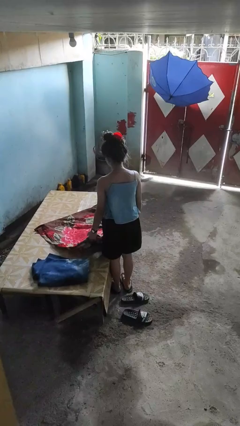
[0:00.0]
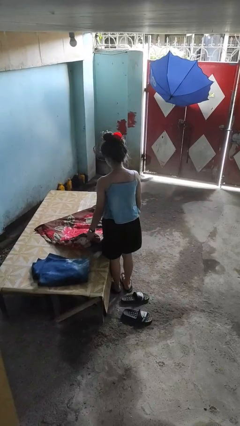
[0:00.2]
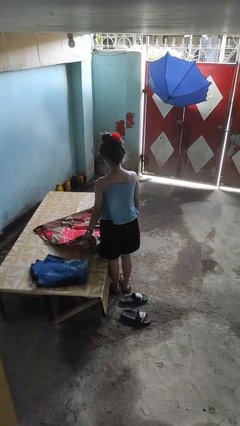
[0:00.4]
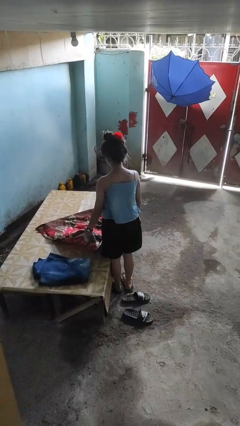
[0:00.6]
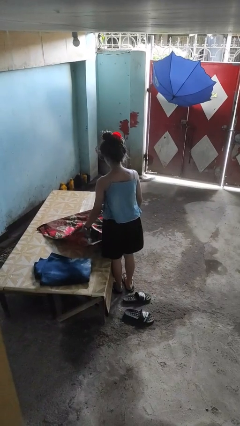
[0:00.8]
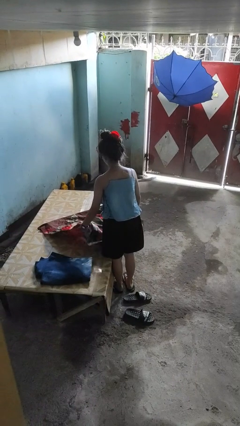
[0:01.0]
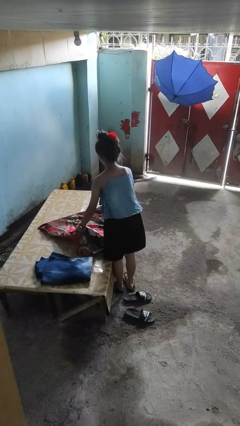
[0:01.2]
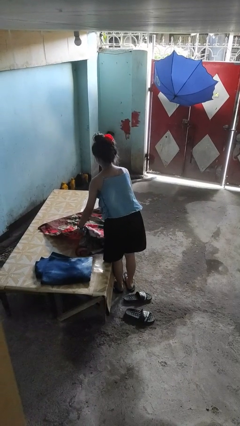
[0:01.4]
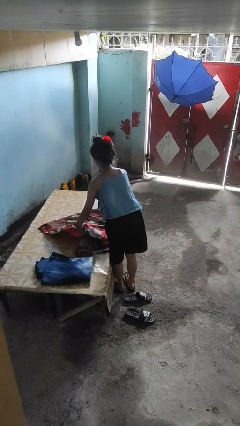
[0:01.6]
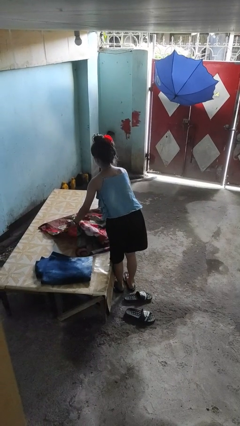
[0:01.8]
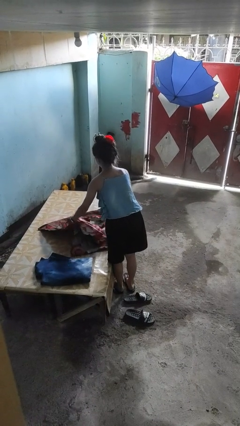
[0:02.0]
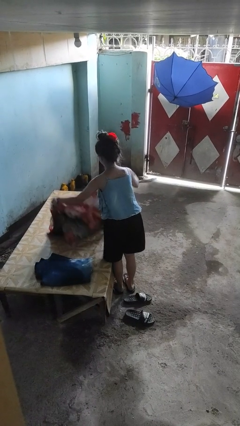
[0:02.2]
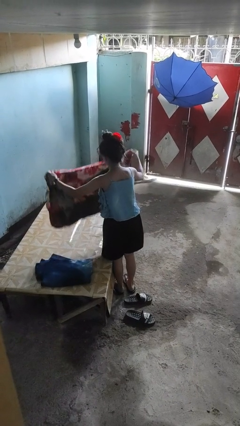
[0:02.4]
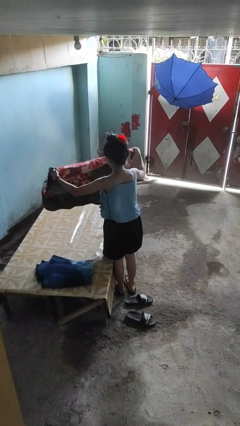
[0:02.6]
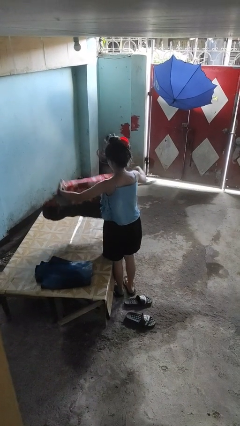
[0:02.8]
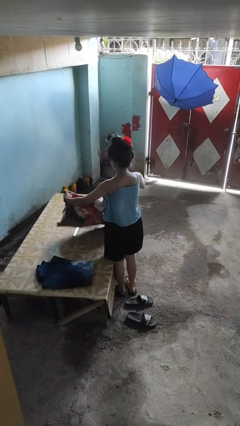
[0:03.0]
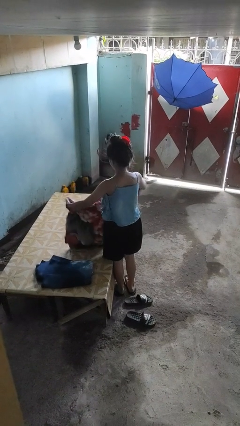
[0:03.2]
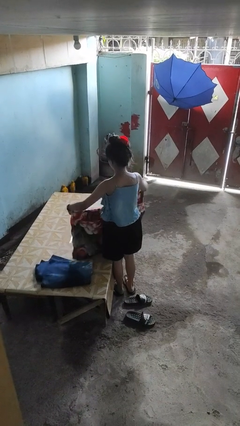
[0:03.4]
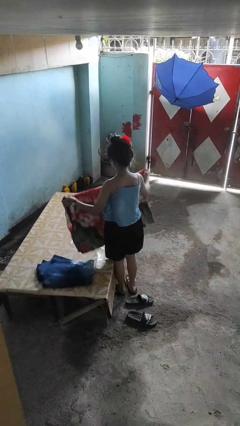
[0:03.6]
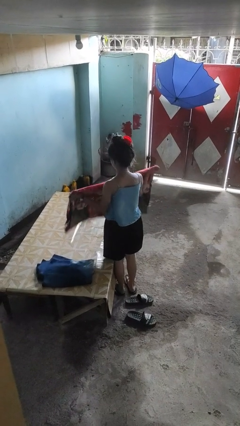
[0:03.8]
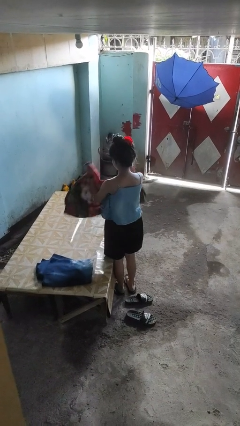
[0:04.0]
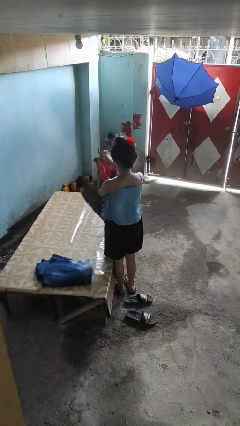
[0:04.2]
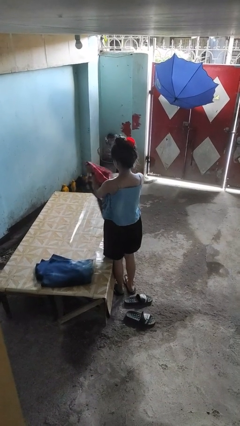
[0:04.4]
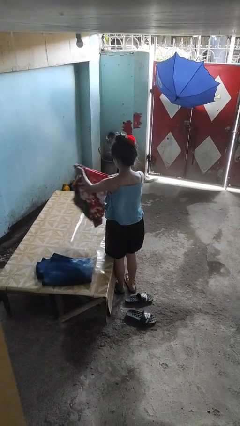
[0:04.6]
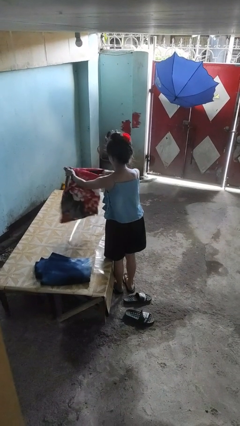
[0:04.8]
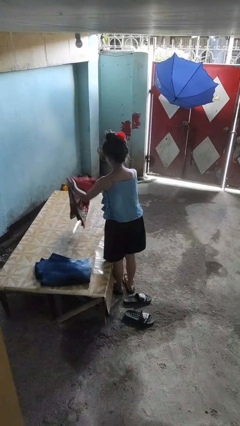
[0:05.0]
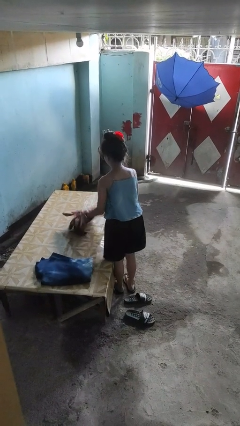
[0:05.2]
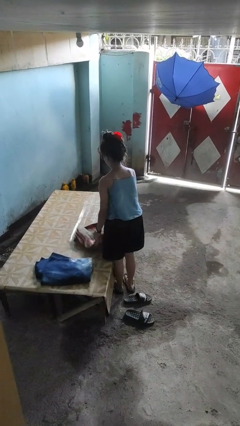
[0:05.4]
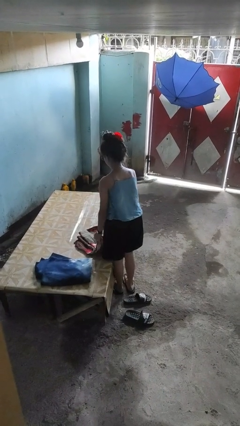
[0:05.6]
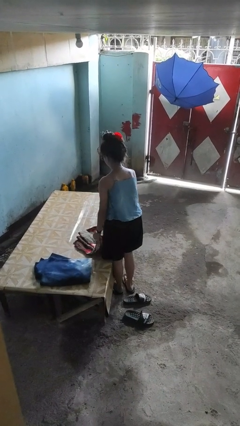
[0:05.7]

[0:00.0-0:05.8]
person folds blanket

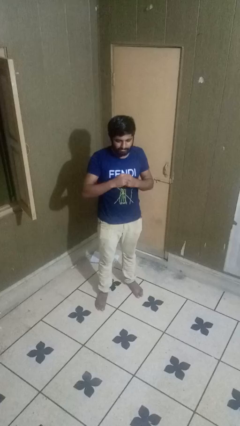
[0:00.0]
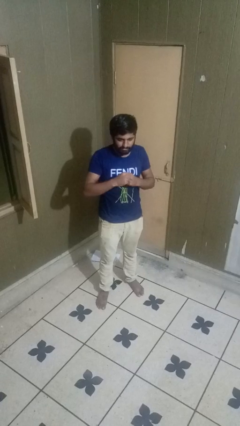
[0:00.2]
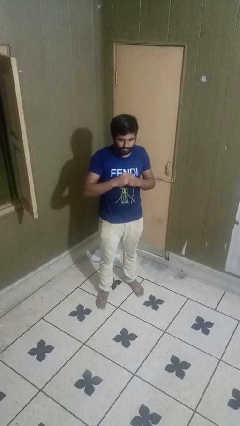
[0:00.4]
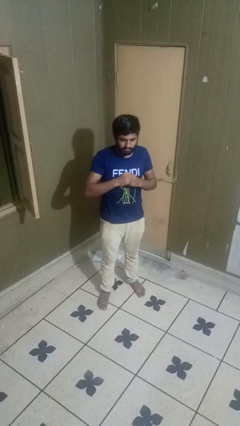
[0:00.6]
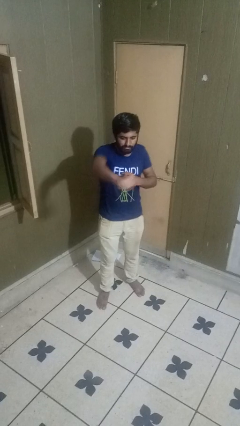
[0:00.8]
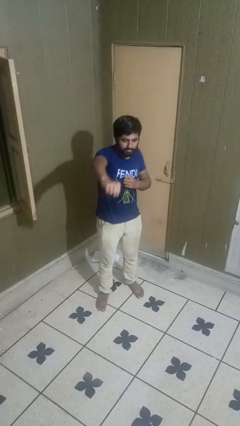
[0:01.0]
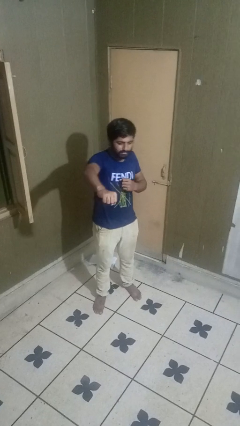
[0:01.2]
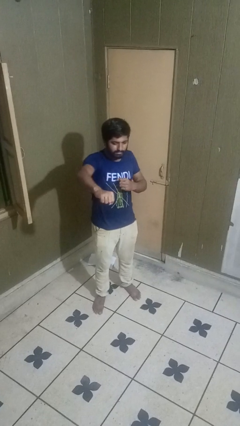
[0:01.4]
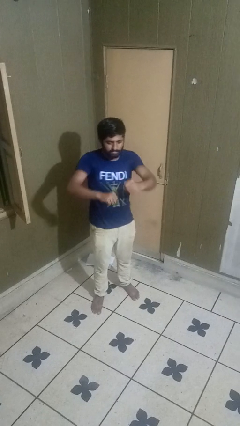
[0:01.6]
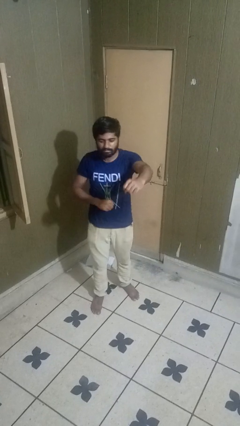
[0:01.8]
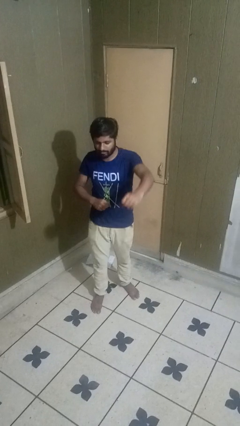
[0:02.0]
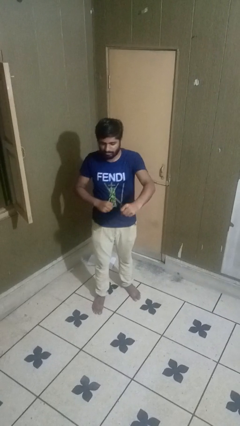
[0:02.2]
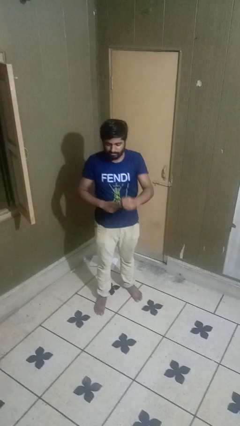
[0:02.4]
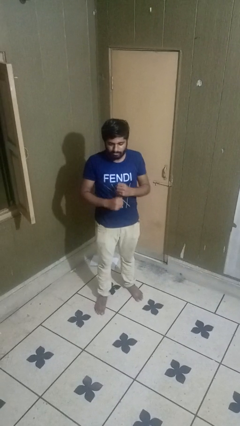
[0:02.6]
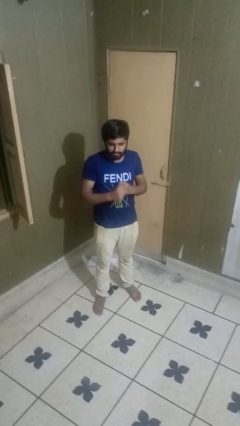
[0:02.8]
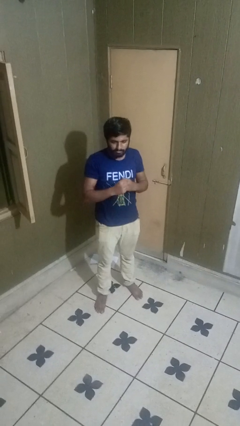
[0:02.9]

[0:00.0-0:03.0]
person punches

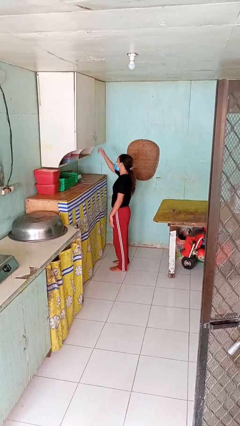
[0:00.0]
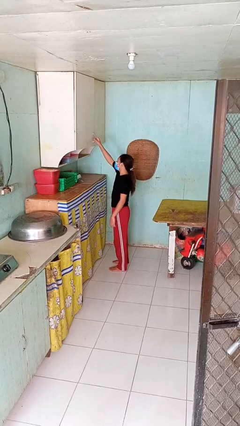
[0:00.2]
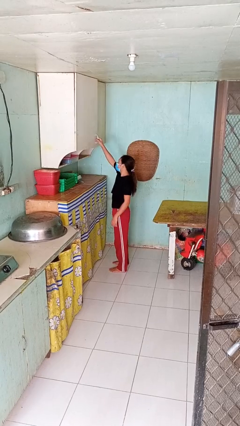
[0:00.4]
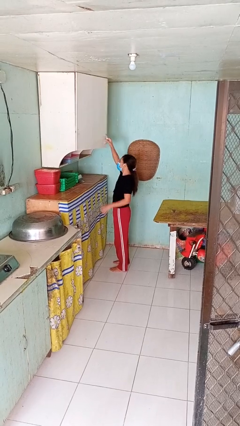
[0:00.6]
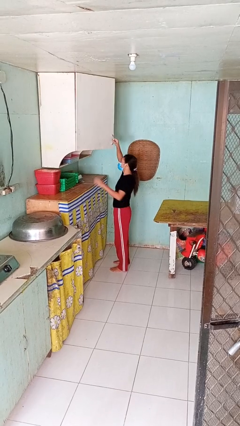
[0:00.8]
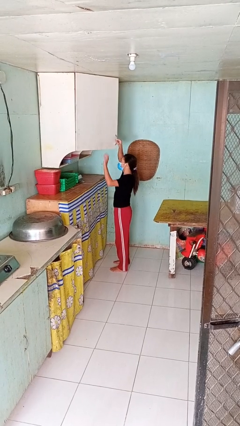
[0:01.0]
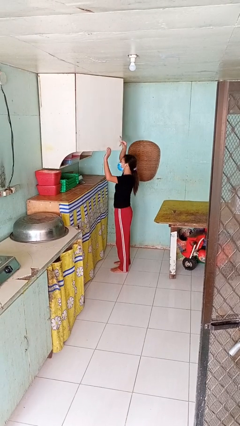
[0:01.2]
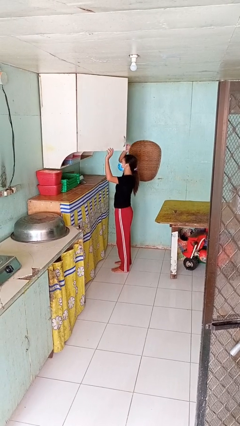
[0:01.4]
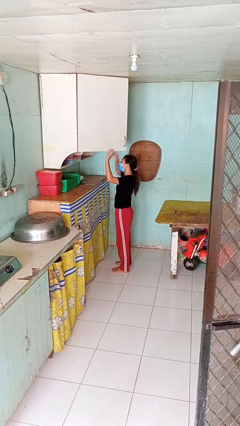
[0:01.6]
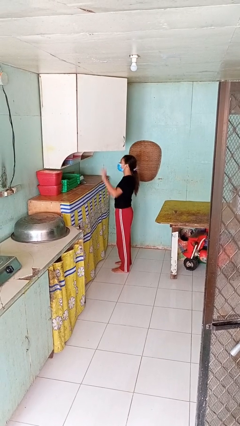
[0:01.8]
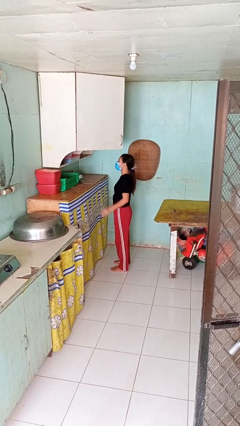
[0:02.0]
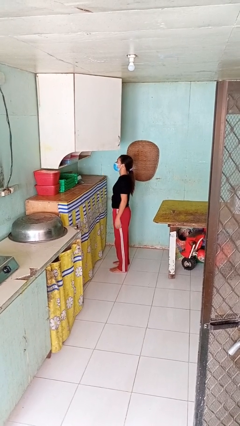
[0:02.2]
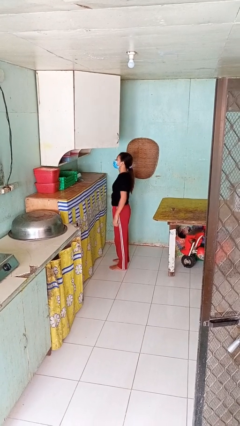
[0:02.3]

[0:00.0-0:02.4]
person opens cabinet

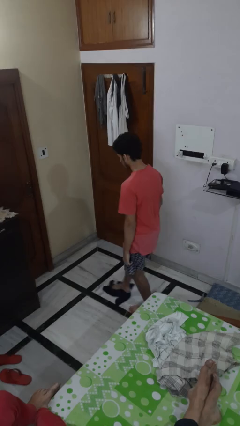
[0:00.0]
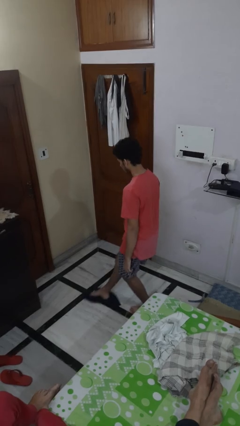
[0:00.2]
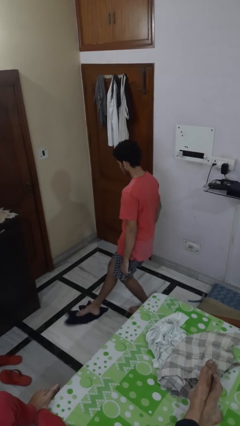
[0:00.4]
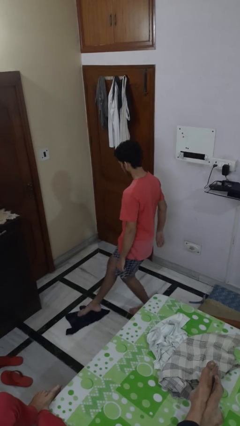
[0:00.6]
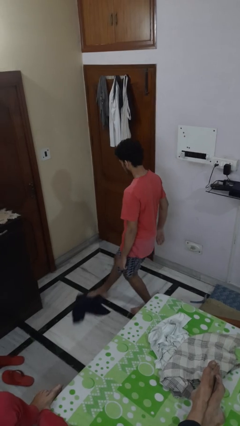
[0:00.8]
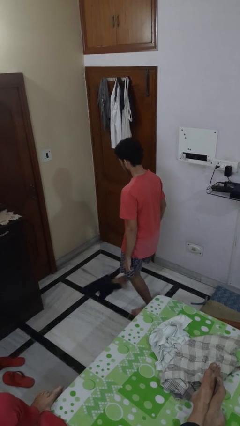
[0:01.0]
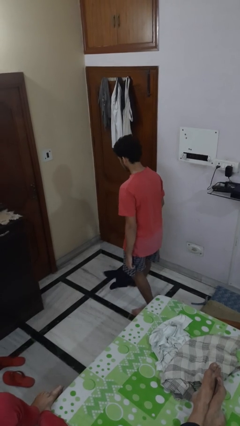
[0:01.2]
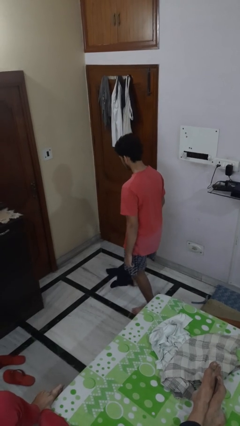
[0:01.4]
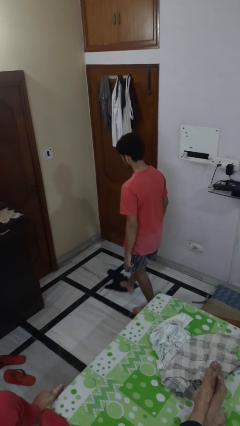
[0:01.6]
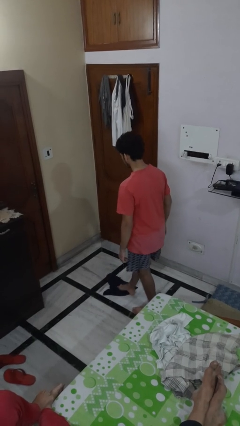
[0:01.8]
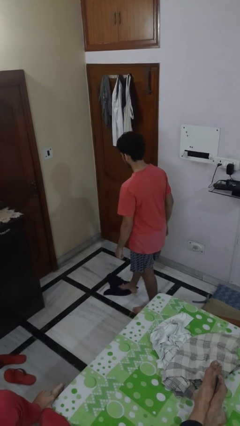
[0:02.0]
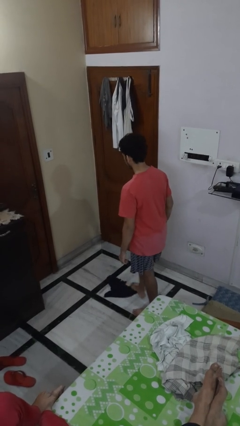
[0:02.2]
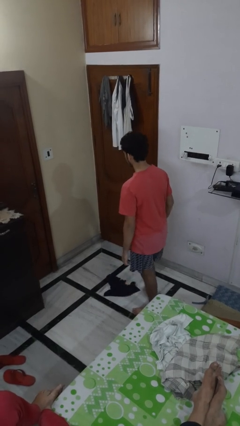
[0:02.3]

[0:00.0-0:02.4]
person mops

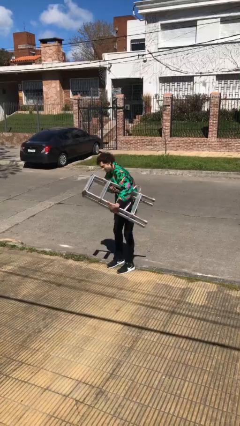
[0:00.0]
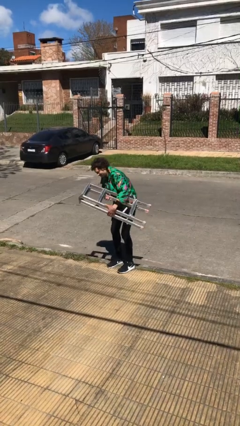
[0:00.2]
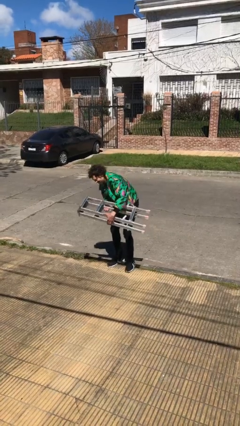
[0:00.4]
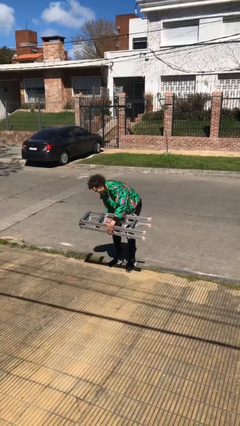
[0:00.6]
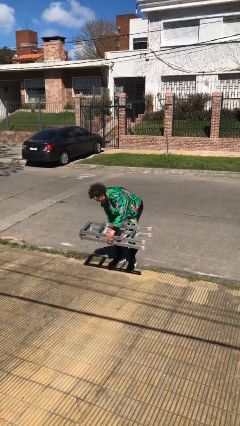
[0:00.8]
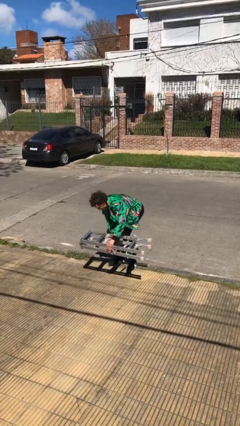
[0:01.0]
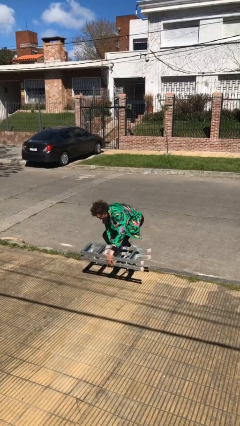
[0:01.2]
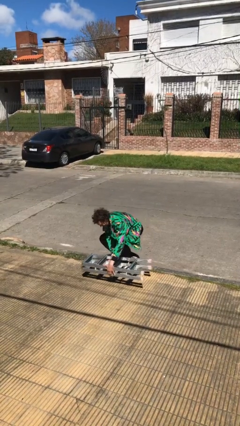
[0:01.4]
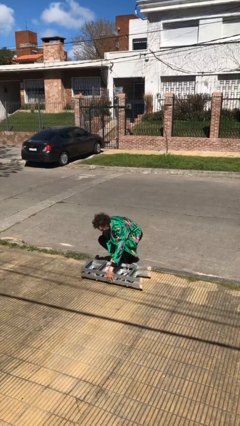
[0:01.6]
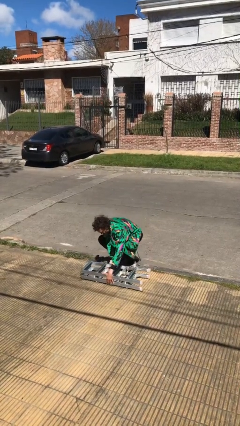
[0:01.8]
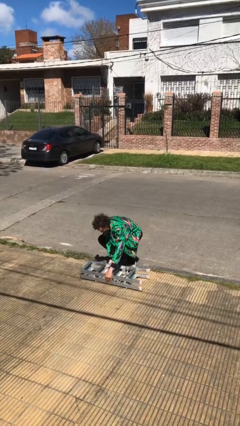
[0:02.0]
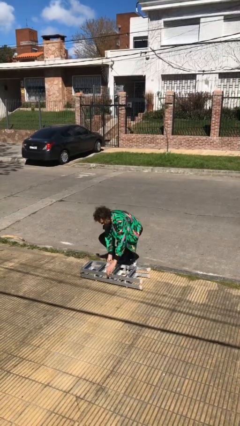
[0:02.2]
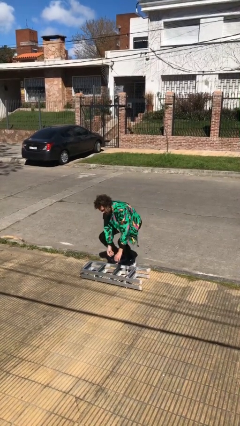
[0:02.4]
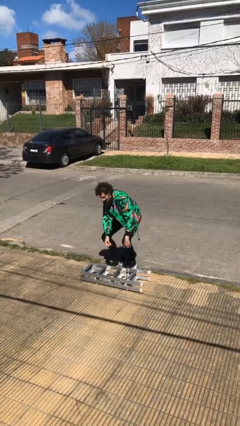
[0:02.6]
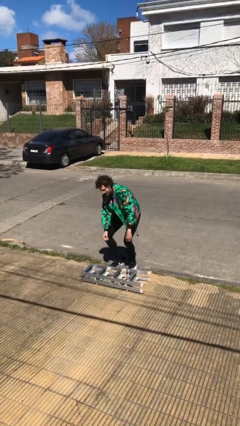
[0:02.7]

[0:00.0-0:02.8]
person puts down object on floor

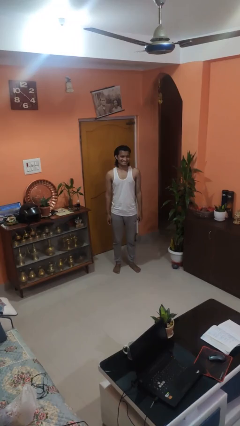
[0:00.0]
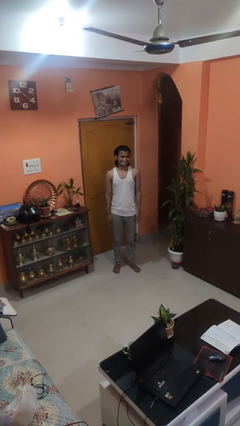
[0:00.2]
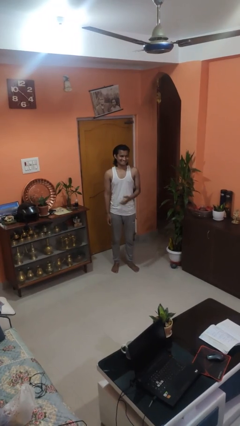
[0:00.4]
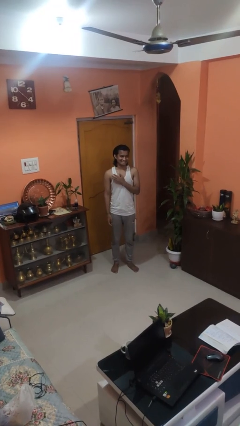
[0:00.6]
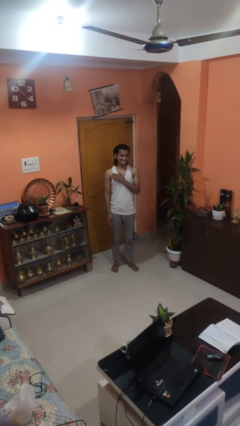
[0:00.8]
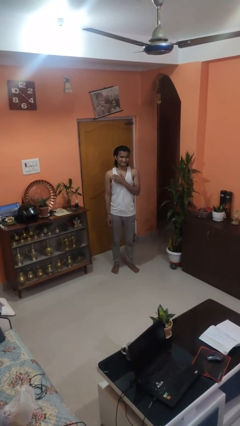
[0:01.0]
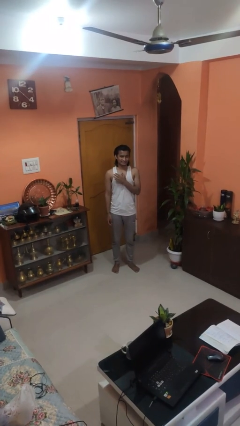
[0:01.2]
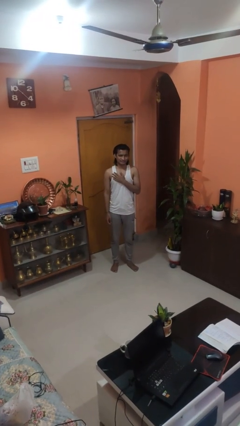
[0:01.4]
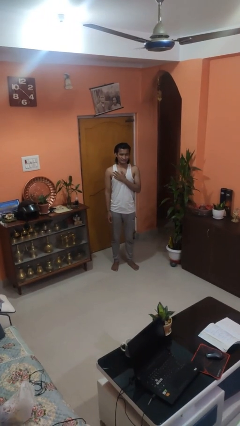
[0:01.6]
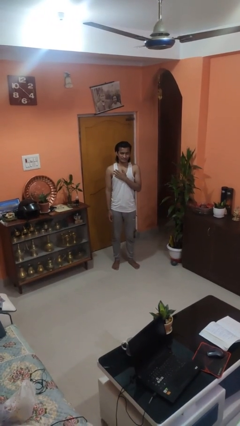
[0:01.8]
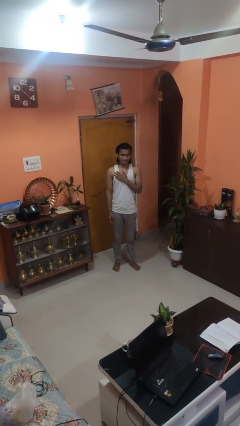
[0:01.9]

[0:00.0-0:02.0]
person drums on chest
